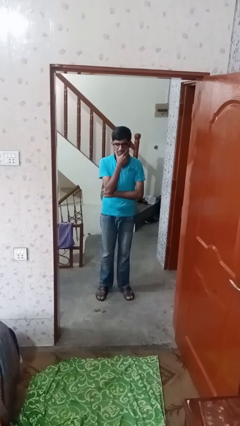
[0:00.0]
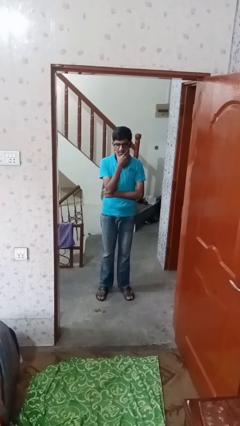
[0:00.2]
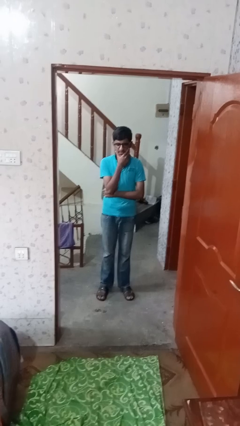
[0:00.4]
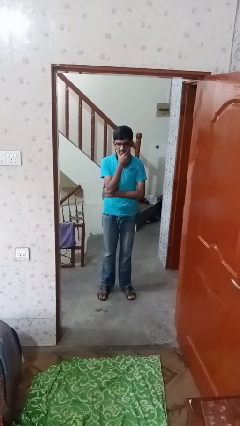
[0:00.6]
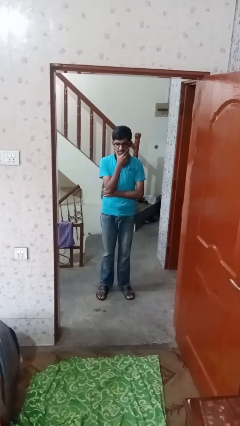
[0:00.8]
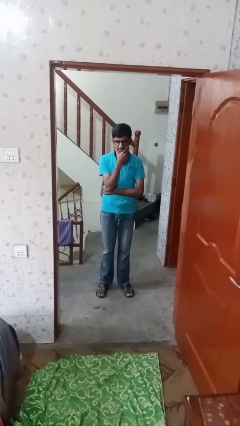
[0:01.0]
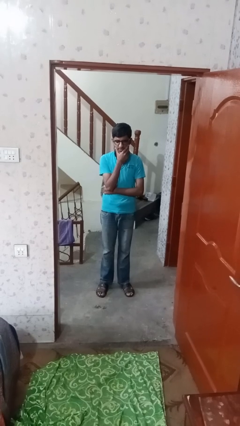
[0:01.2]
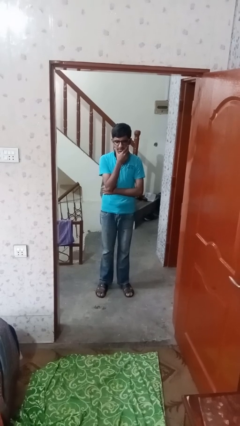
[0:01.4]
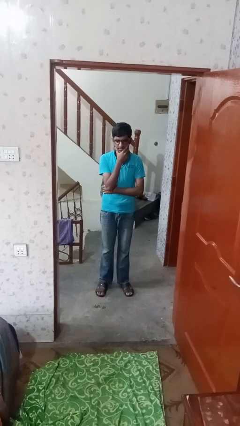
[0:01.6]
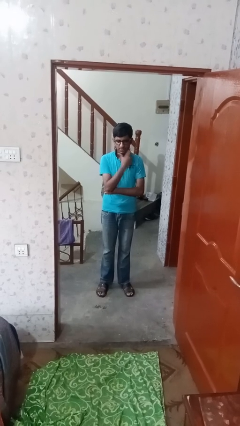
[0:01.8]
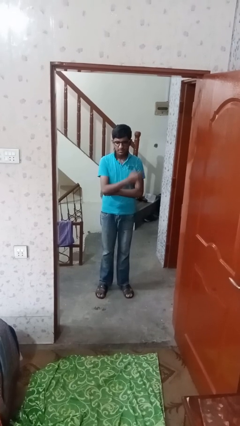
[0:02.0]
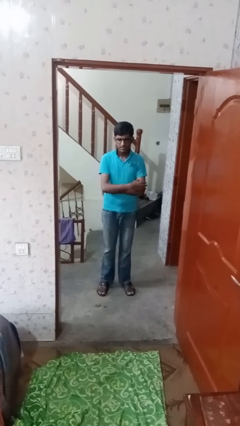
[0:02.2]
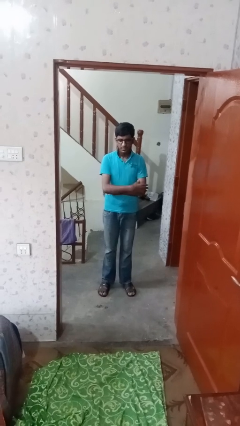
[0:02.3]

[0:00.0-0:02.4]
person strokes chin

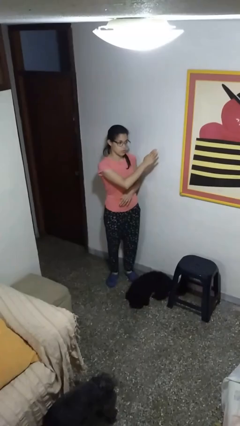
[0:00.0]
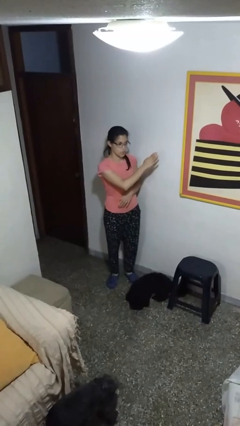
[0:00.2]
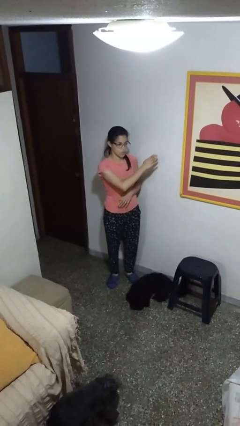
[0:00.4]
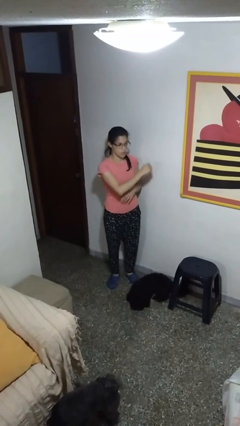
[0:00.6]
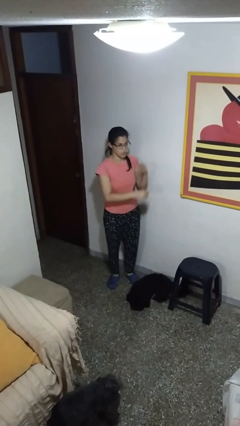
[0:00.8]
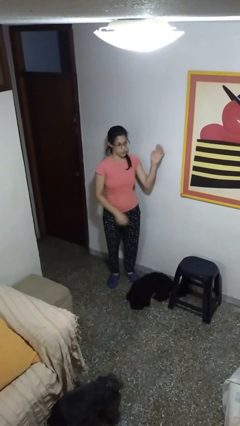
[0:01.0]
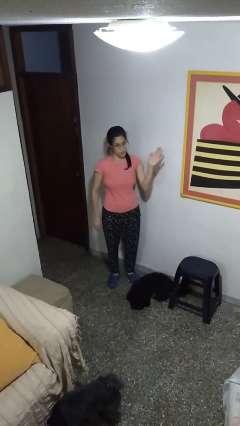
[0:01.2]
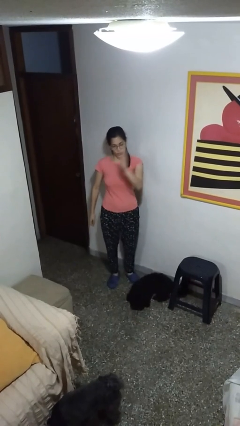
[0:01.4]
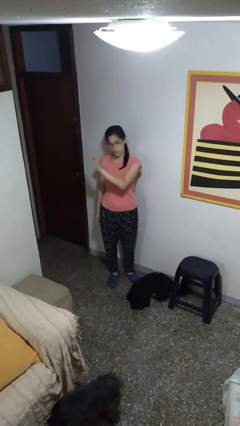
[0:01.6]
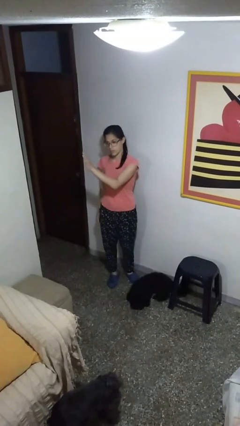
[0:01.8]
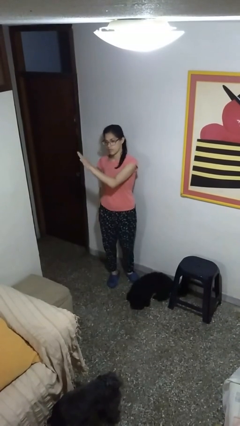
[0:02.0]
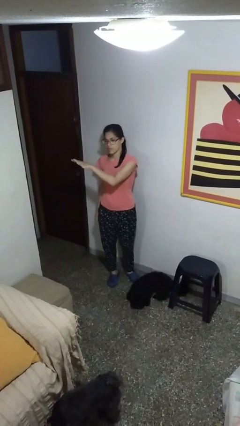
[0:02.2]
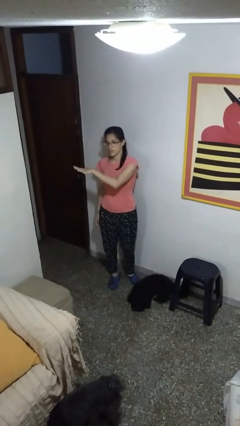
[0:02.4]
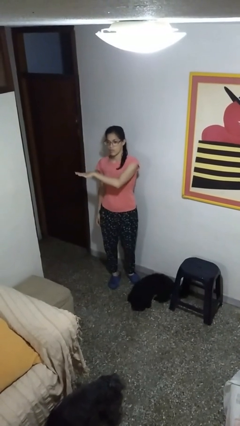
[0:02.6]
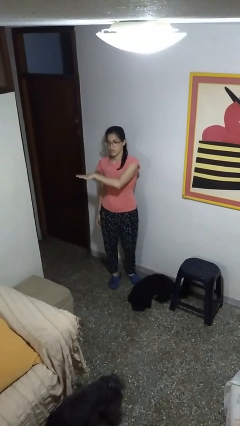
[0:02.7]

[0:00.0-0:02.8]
person gestures swipe right

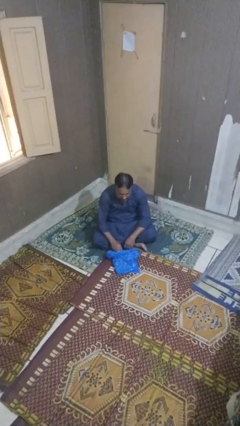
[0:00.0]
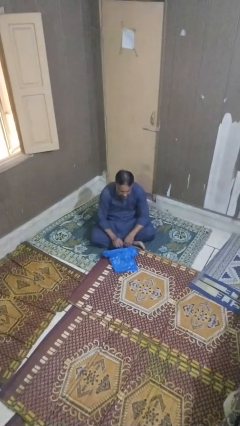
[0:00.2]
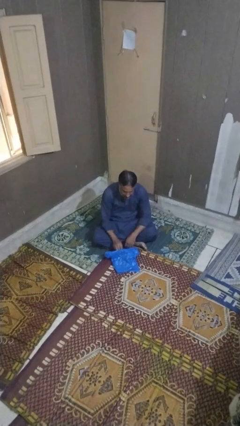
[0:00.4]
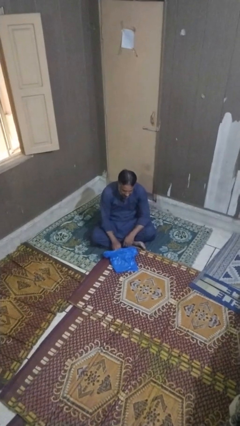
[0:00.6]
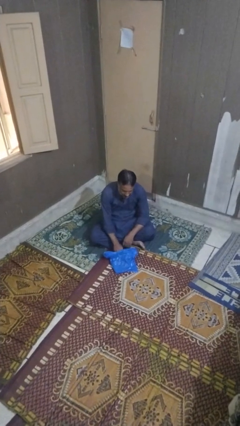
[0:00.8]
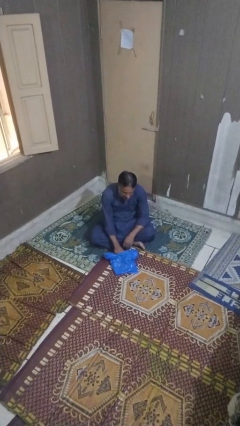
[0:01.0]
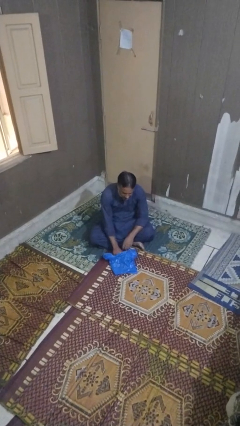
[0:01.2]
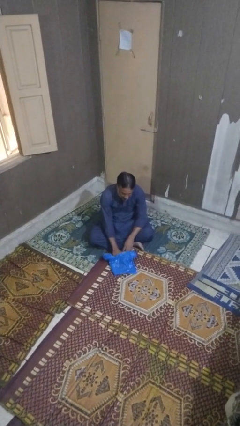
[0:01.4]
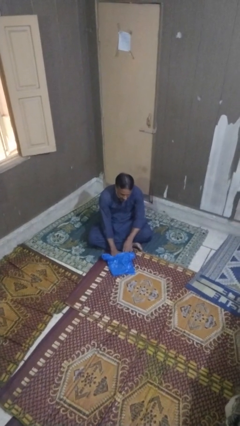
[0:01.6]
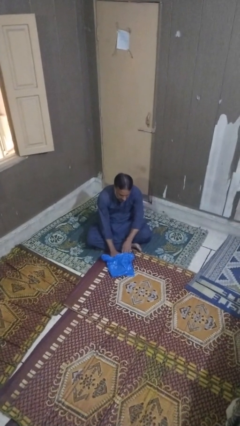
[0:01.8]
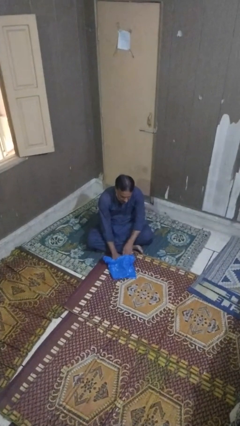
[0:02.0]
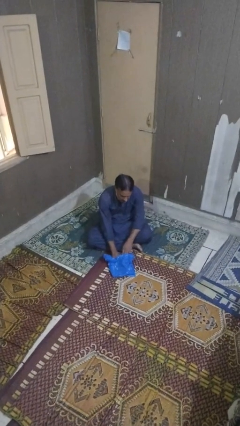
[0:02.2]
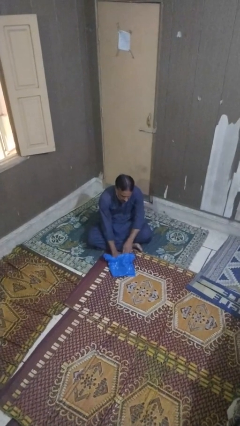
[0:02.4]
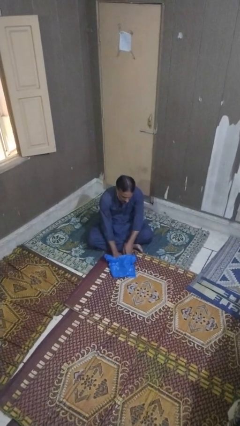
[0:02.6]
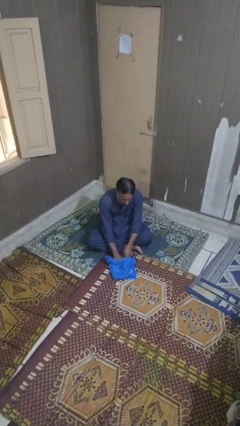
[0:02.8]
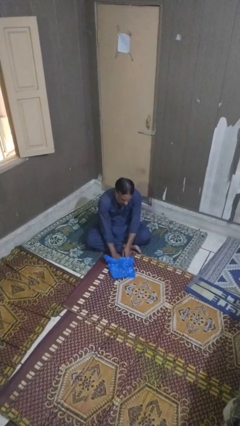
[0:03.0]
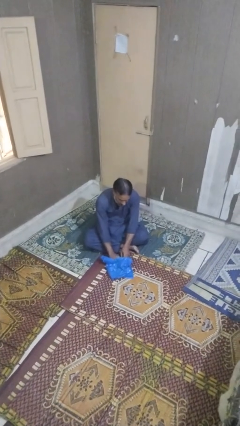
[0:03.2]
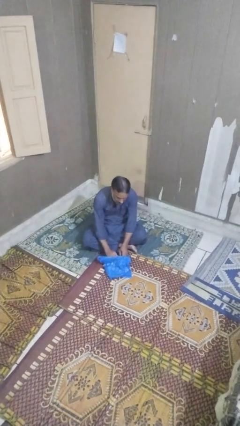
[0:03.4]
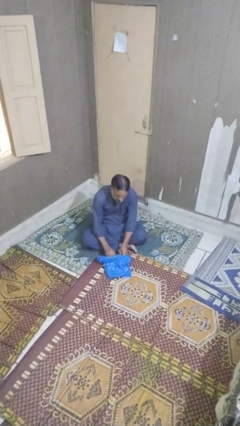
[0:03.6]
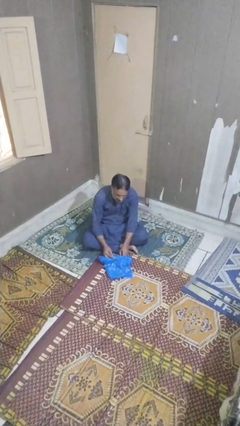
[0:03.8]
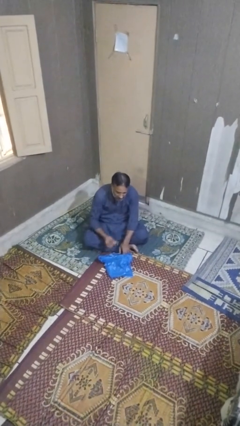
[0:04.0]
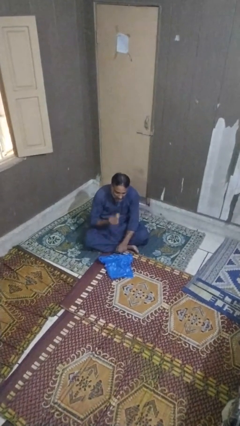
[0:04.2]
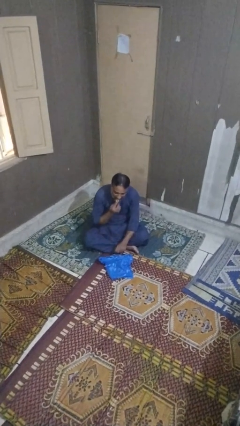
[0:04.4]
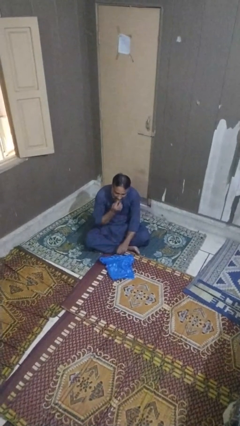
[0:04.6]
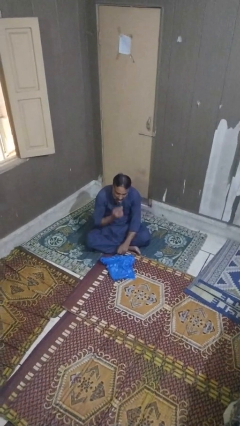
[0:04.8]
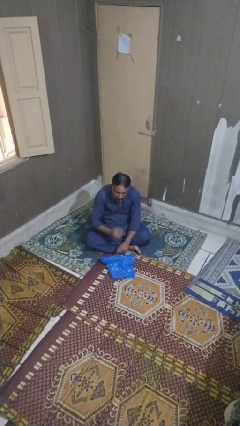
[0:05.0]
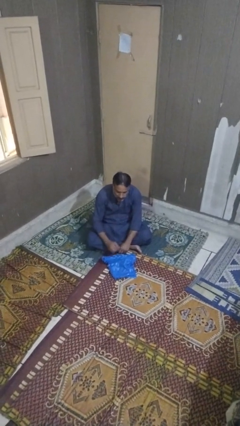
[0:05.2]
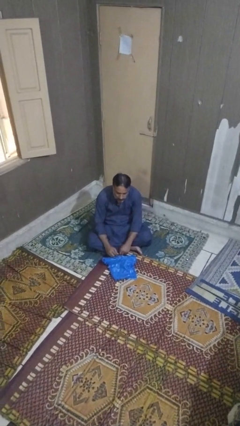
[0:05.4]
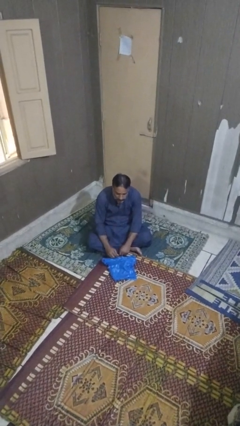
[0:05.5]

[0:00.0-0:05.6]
person eats snack from bag

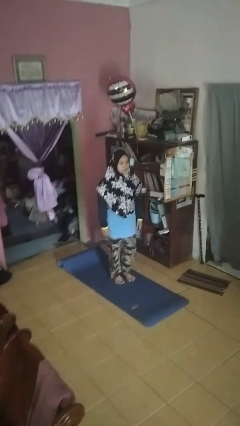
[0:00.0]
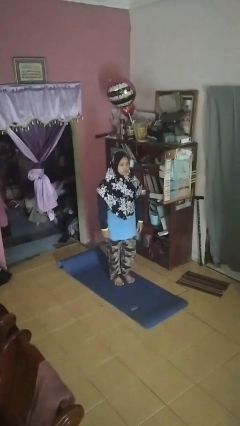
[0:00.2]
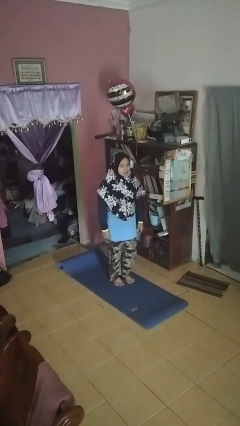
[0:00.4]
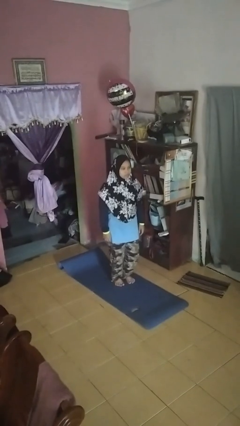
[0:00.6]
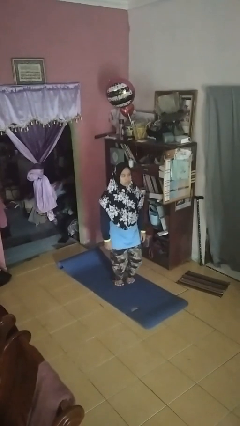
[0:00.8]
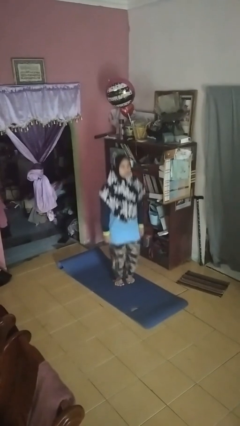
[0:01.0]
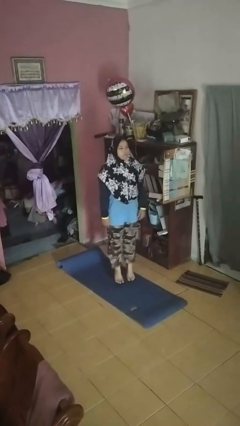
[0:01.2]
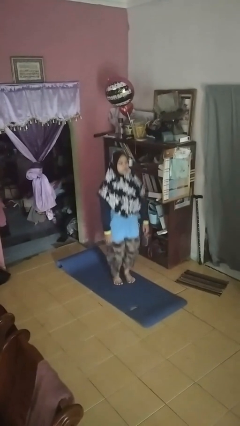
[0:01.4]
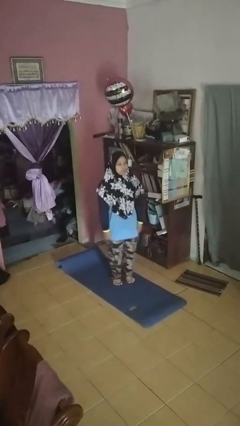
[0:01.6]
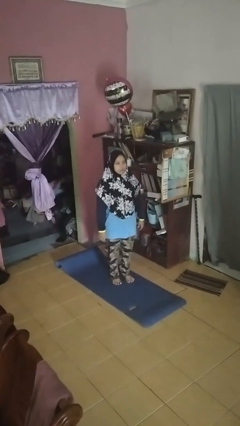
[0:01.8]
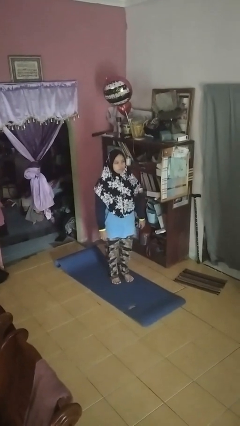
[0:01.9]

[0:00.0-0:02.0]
person jumps

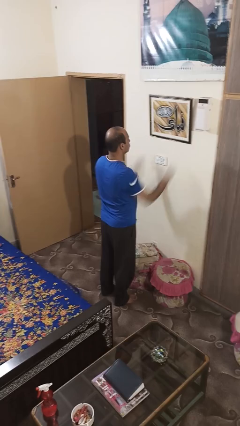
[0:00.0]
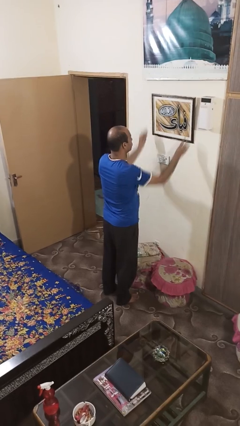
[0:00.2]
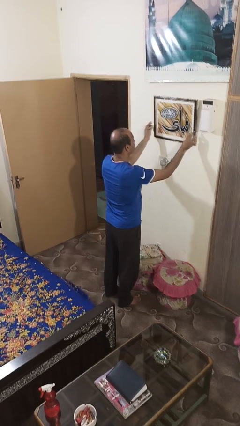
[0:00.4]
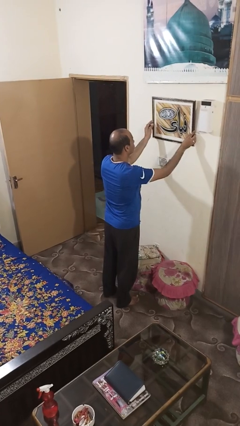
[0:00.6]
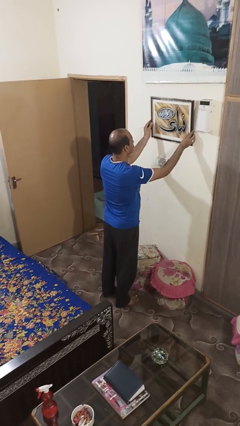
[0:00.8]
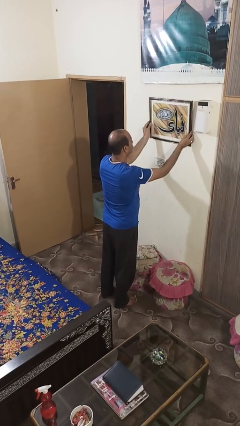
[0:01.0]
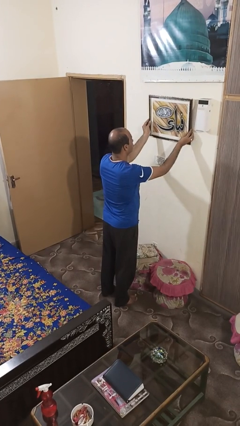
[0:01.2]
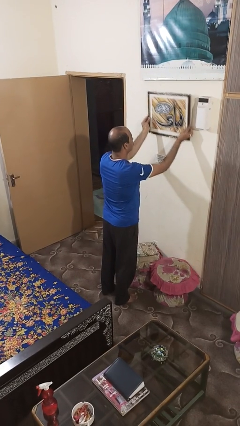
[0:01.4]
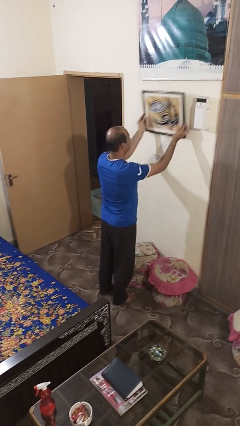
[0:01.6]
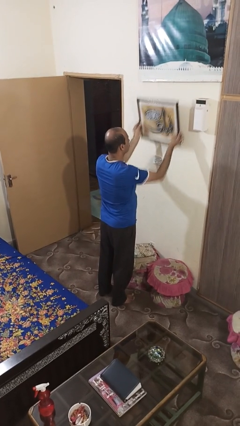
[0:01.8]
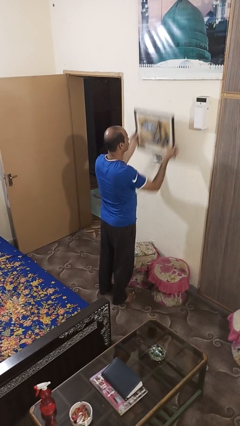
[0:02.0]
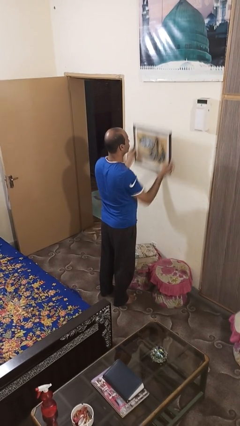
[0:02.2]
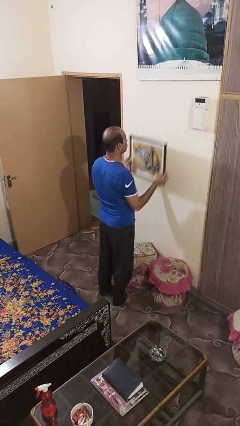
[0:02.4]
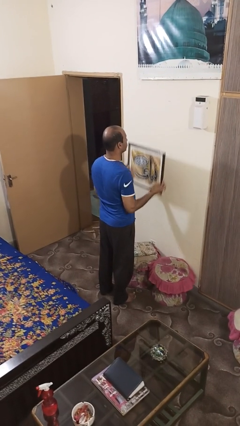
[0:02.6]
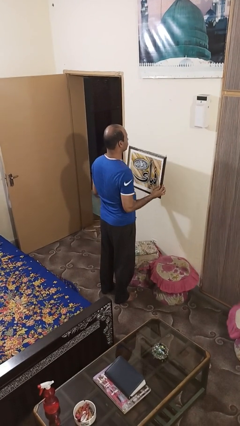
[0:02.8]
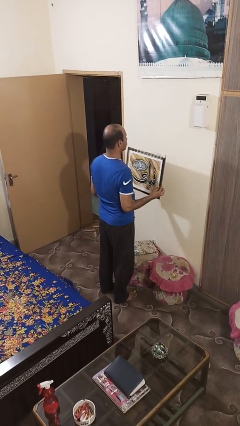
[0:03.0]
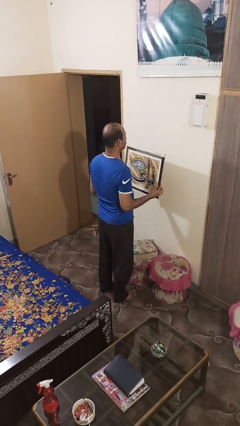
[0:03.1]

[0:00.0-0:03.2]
person takes down picture frame

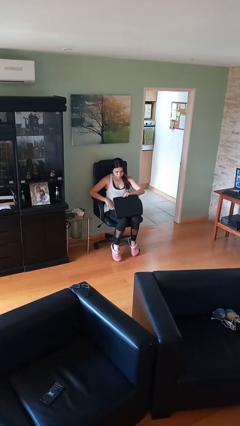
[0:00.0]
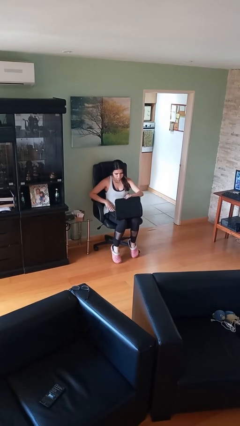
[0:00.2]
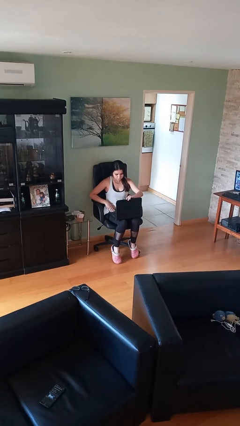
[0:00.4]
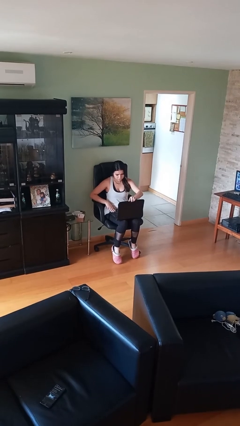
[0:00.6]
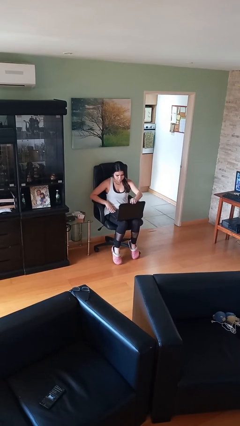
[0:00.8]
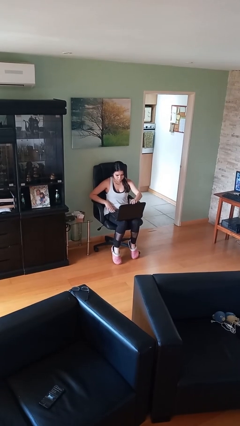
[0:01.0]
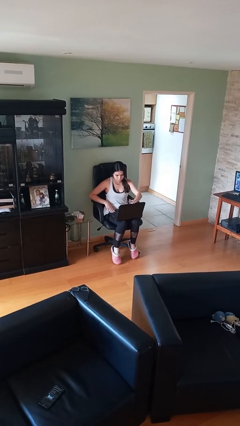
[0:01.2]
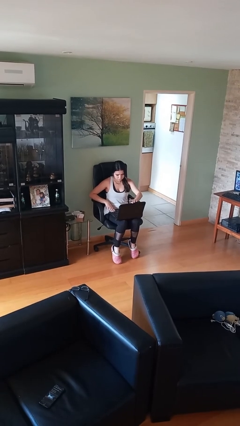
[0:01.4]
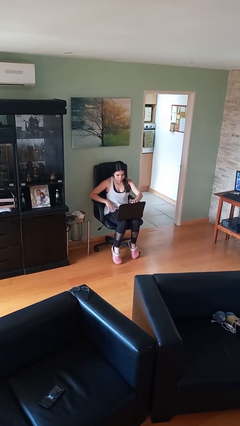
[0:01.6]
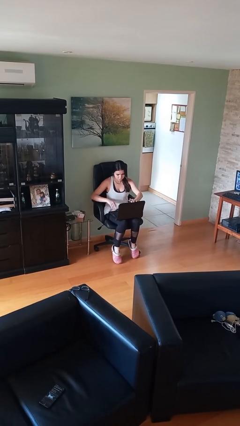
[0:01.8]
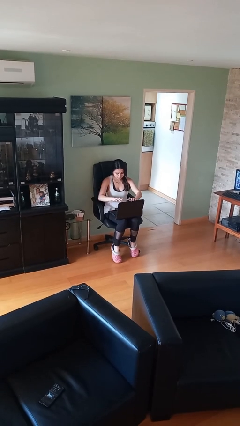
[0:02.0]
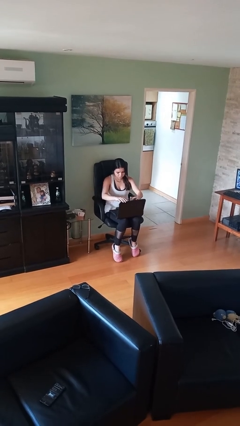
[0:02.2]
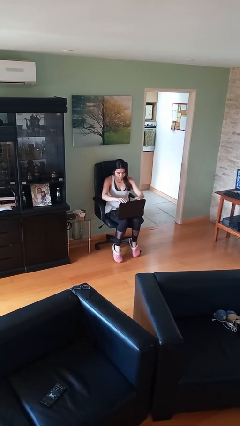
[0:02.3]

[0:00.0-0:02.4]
person interacts with laptop
